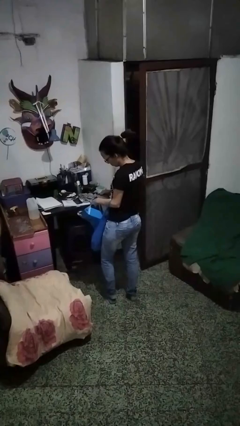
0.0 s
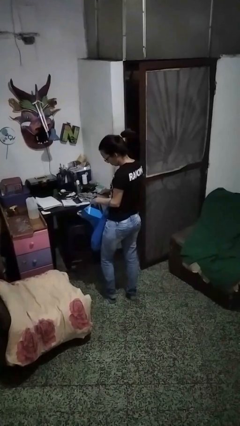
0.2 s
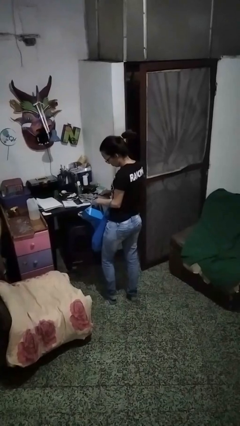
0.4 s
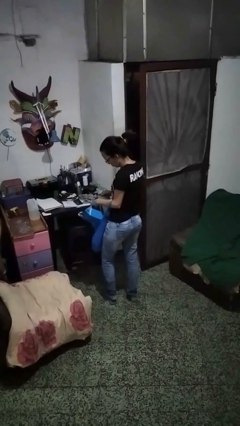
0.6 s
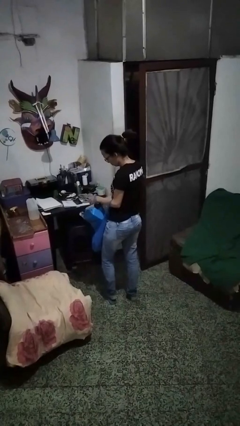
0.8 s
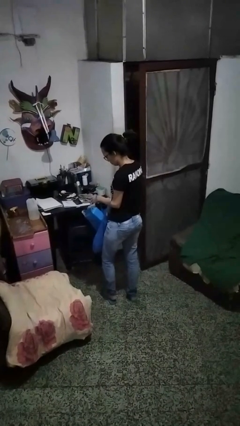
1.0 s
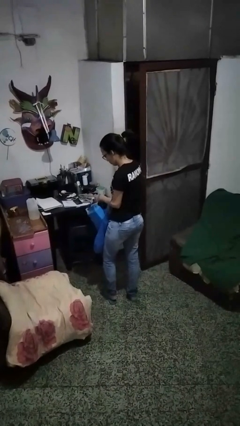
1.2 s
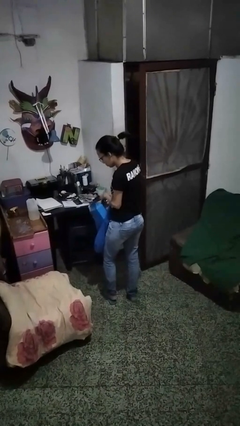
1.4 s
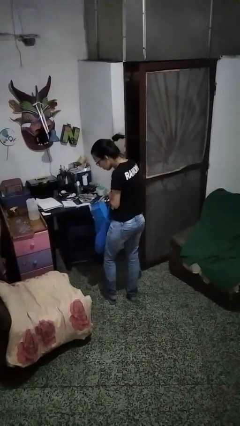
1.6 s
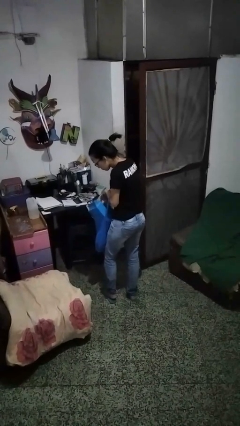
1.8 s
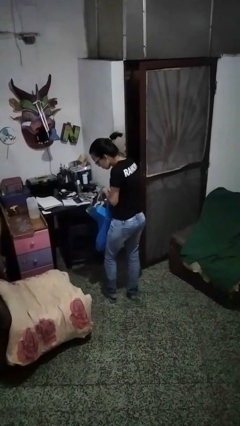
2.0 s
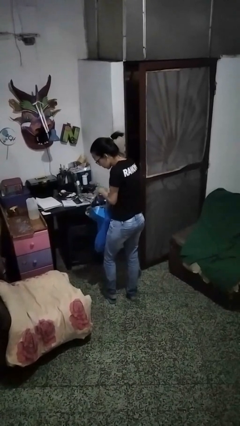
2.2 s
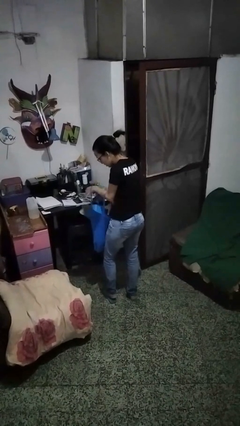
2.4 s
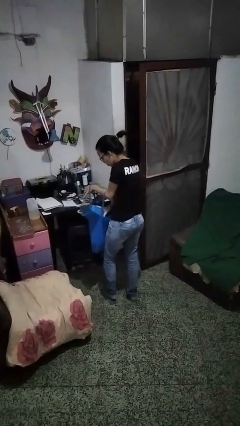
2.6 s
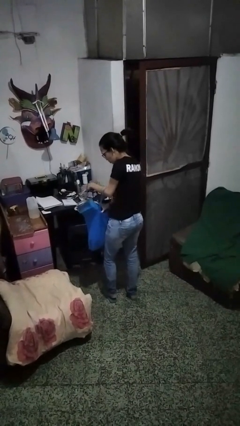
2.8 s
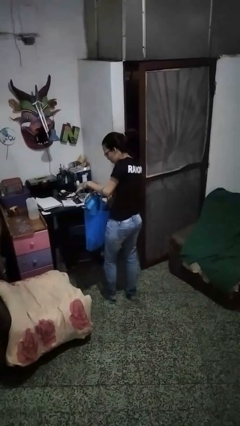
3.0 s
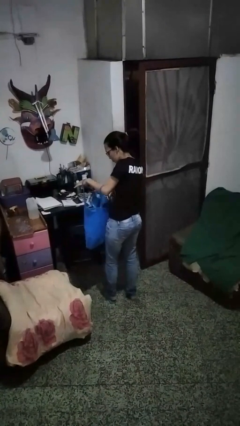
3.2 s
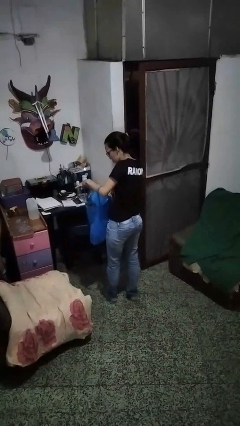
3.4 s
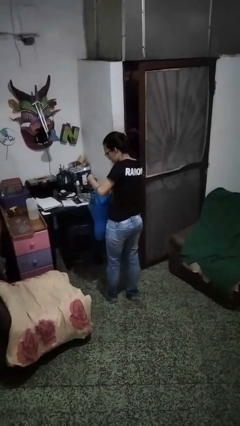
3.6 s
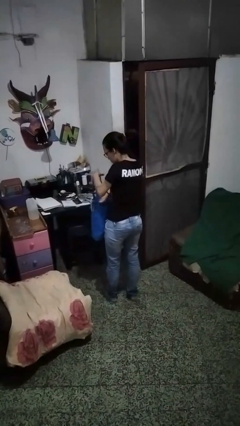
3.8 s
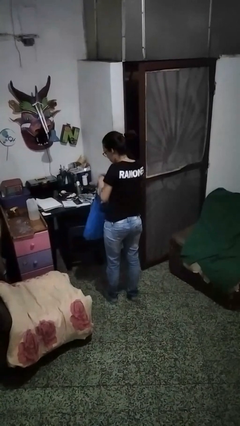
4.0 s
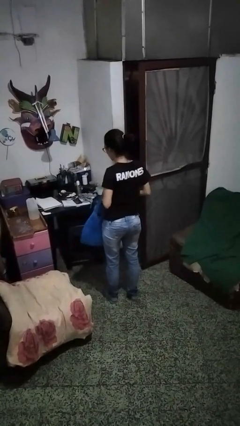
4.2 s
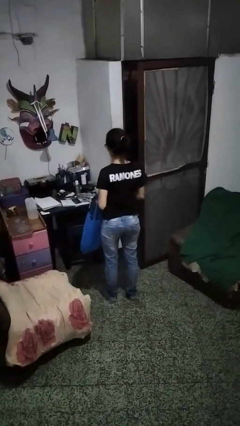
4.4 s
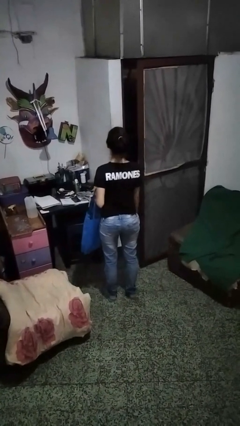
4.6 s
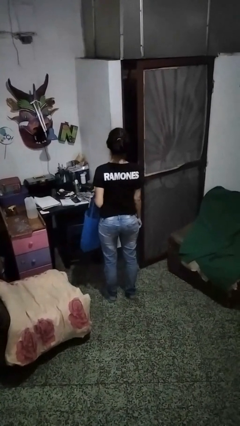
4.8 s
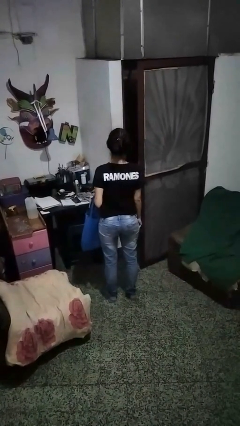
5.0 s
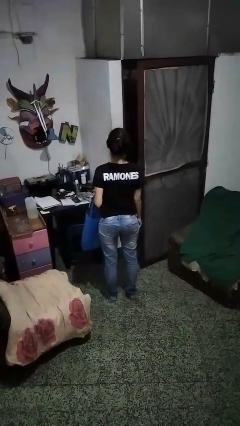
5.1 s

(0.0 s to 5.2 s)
person puts object into bag

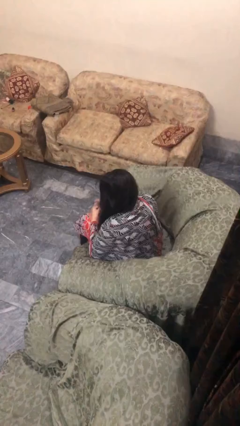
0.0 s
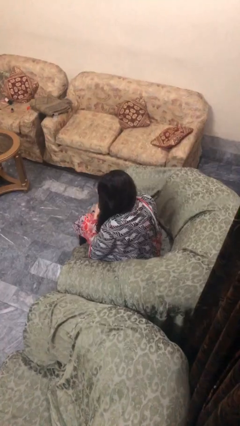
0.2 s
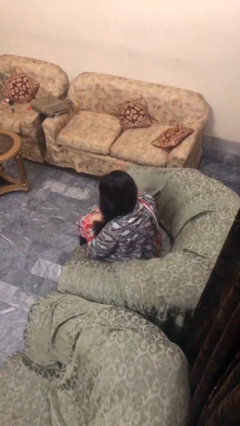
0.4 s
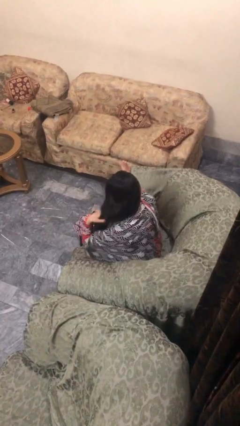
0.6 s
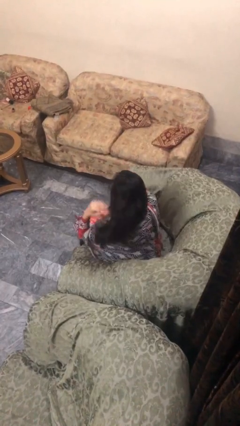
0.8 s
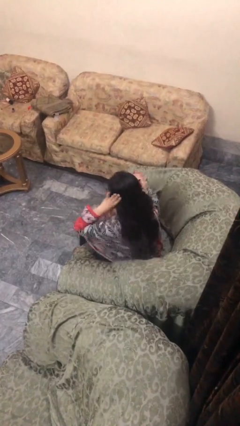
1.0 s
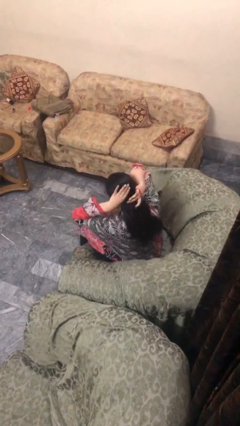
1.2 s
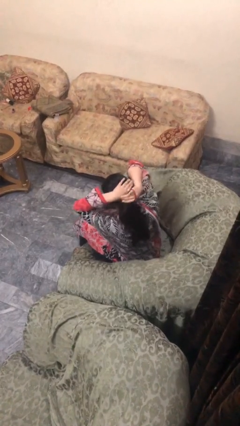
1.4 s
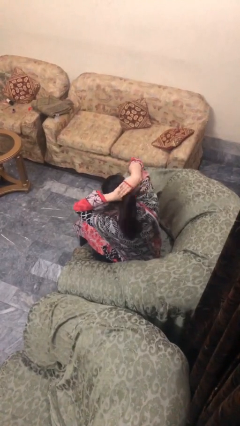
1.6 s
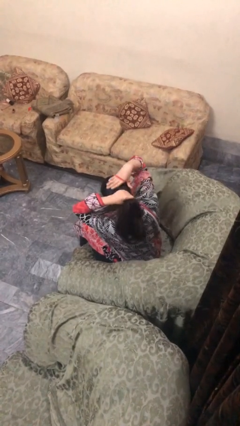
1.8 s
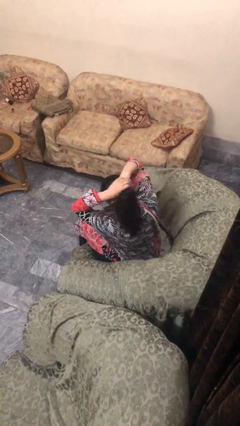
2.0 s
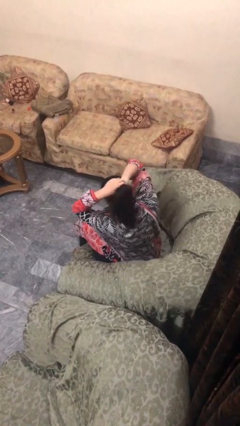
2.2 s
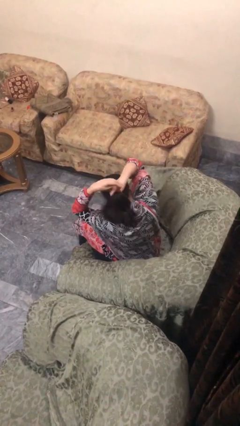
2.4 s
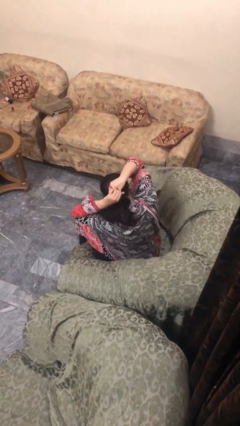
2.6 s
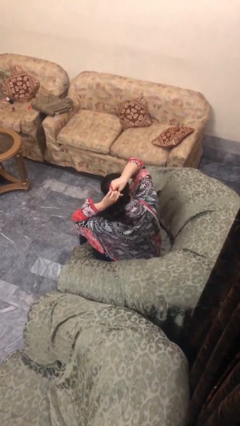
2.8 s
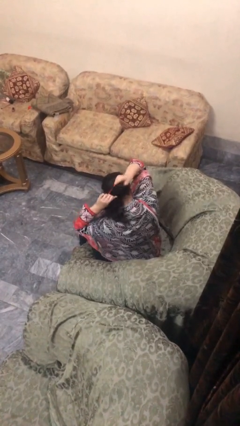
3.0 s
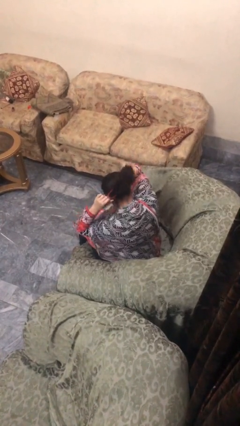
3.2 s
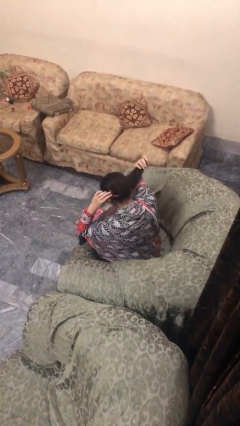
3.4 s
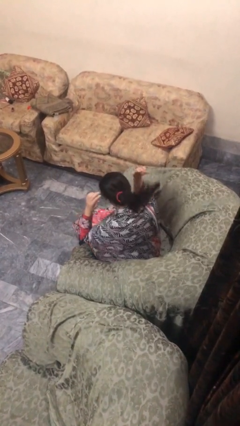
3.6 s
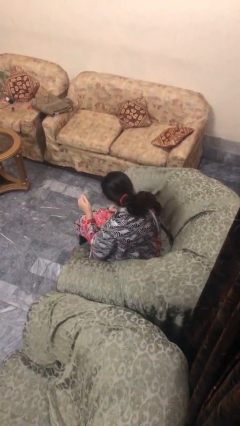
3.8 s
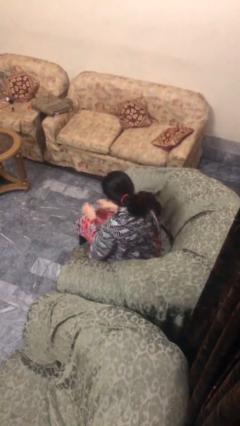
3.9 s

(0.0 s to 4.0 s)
person puts hair in ponytail

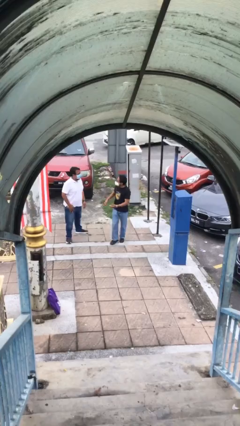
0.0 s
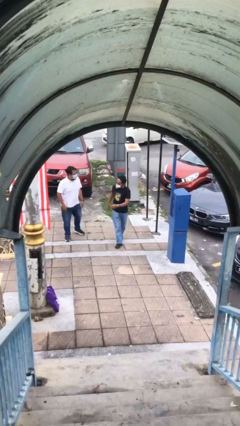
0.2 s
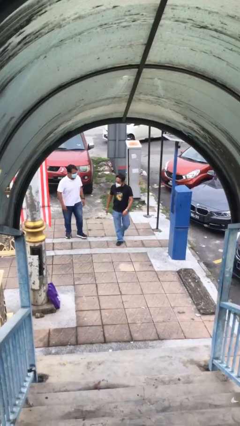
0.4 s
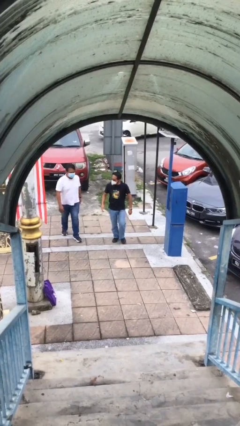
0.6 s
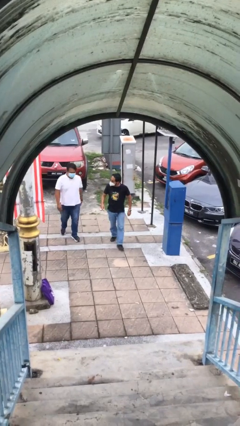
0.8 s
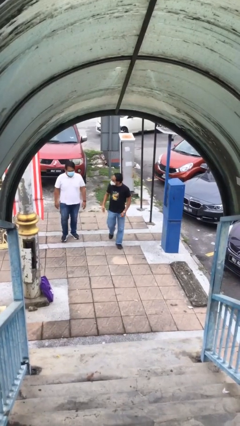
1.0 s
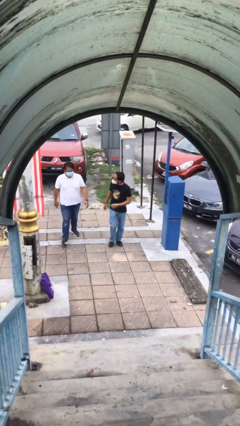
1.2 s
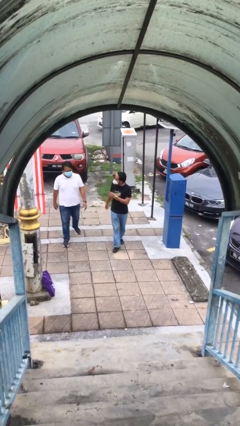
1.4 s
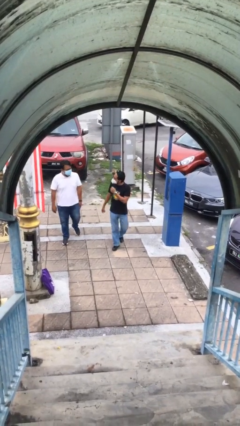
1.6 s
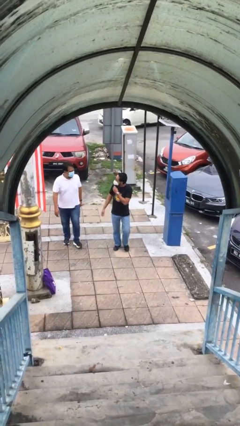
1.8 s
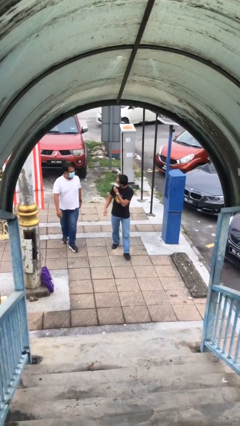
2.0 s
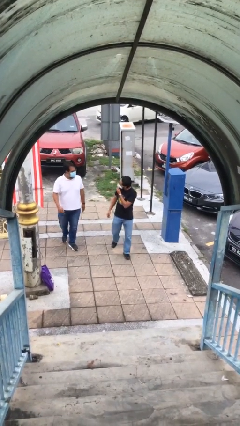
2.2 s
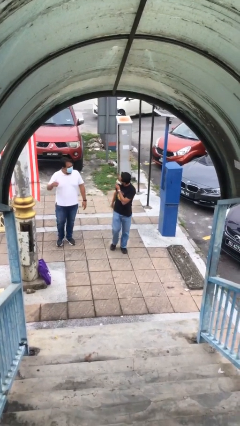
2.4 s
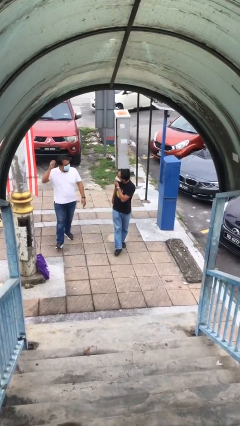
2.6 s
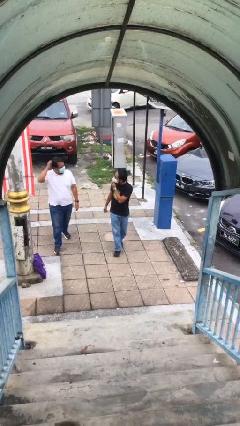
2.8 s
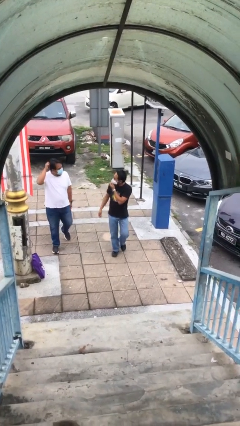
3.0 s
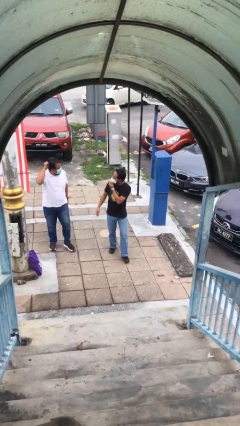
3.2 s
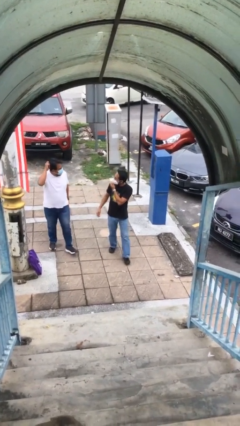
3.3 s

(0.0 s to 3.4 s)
person talks to person

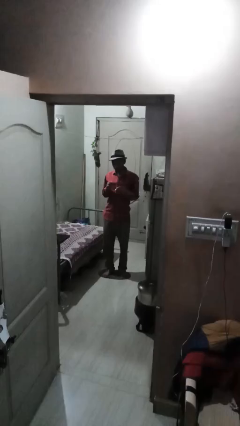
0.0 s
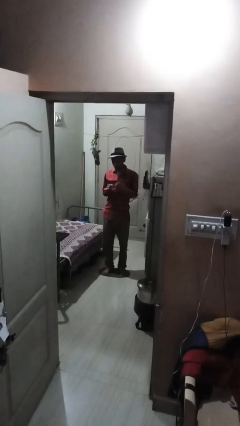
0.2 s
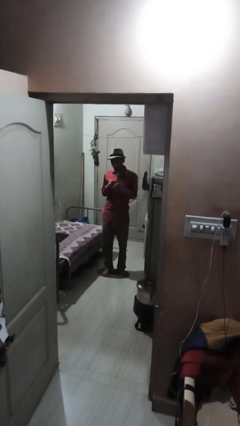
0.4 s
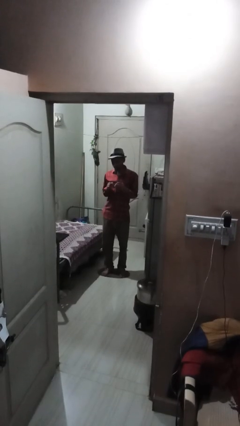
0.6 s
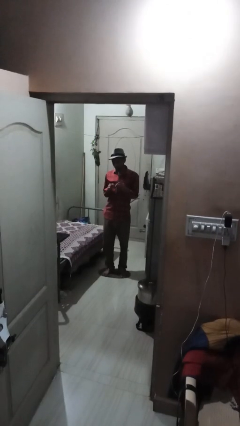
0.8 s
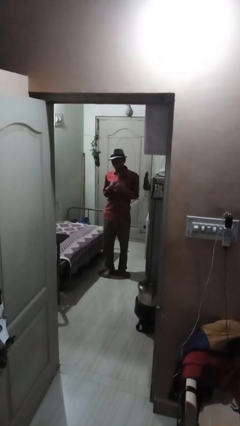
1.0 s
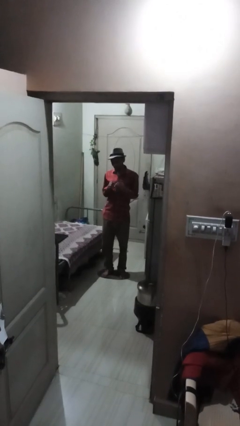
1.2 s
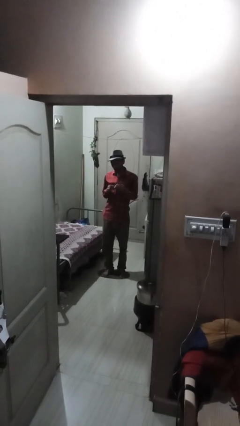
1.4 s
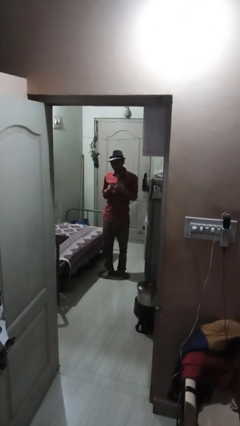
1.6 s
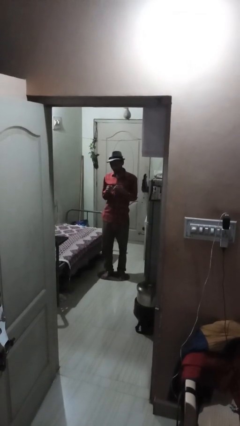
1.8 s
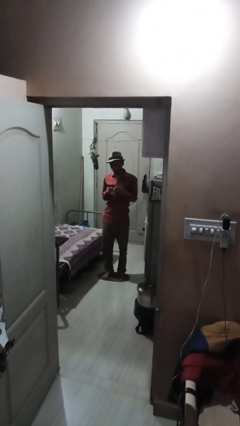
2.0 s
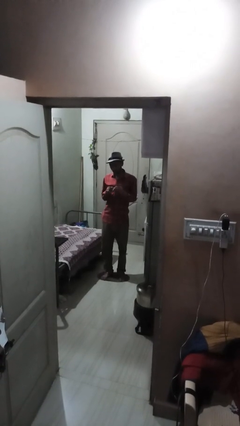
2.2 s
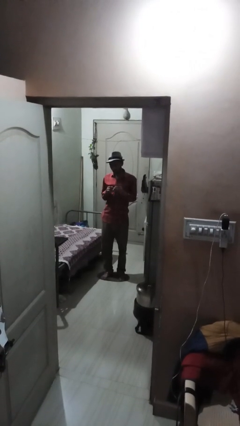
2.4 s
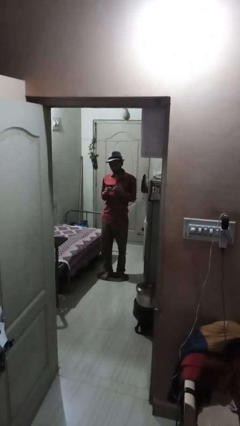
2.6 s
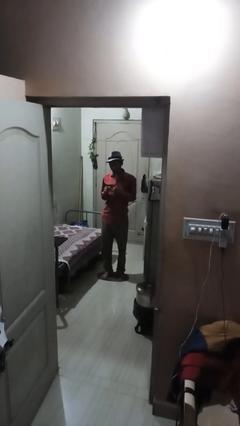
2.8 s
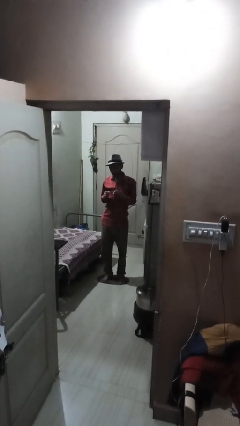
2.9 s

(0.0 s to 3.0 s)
person files fingernails

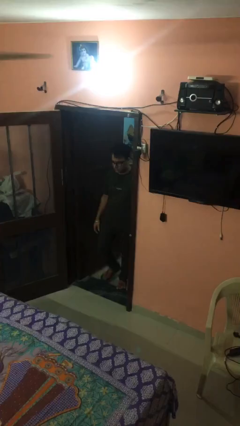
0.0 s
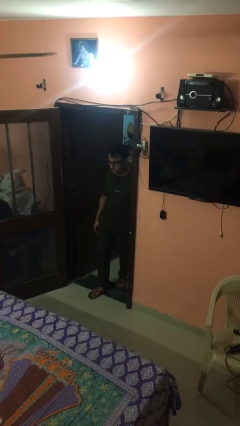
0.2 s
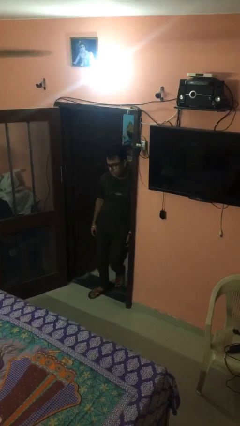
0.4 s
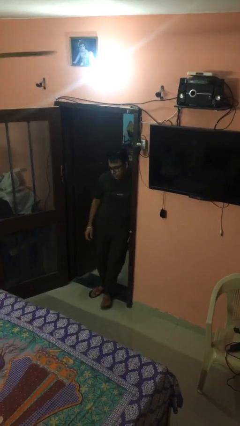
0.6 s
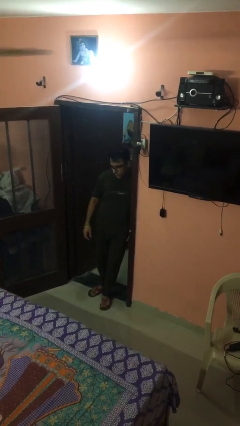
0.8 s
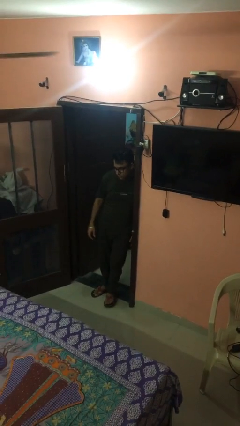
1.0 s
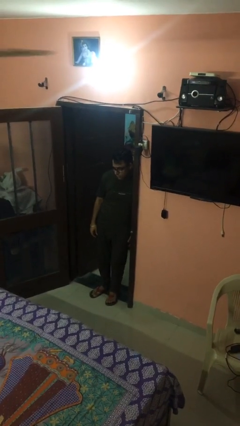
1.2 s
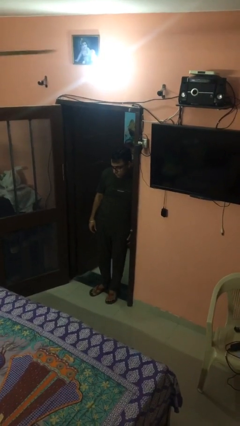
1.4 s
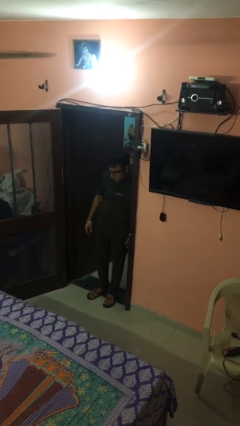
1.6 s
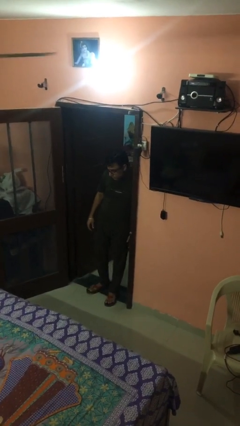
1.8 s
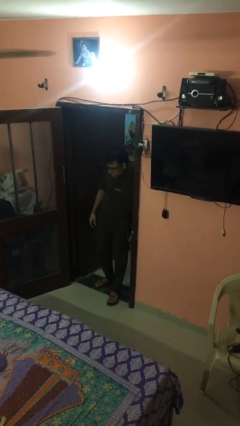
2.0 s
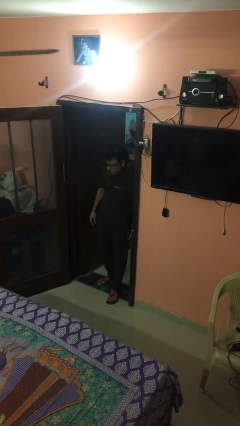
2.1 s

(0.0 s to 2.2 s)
person bumps into wall

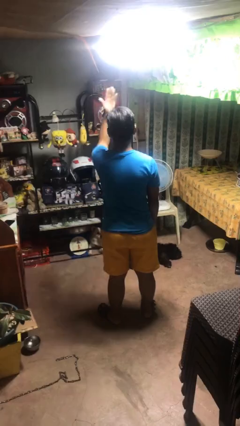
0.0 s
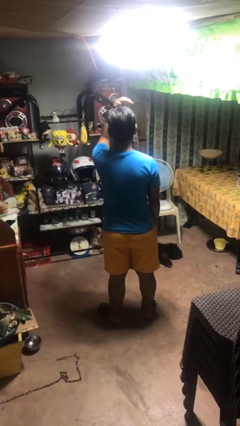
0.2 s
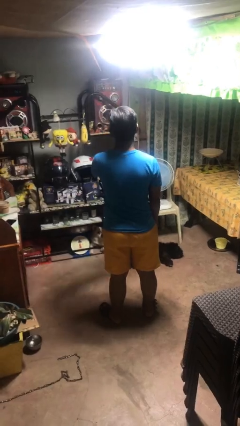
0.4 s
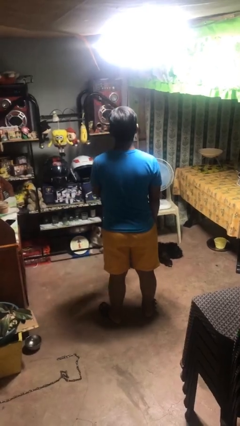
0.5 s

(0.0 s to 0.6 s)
person gestures swipe up
